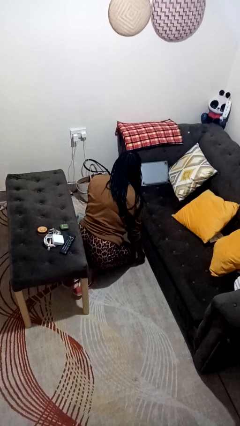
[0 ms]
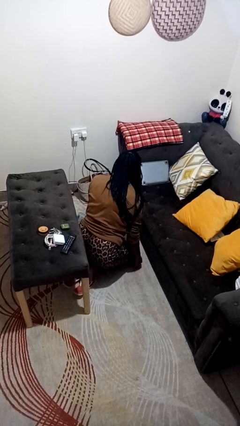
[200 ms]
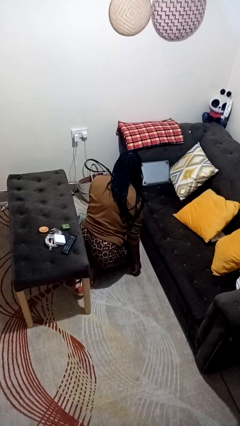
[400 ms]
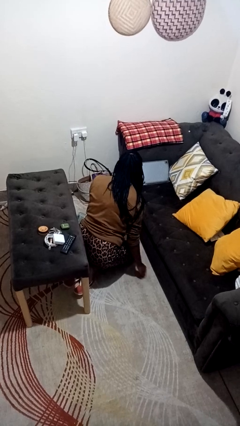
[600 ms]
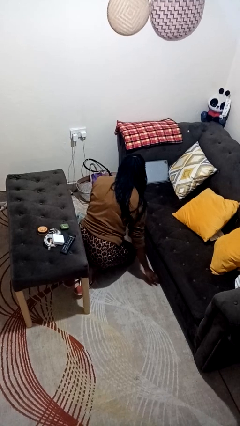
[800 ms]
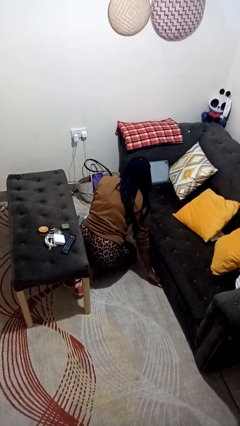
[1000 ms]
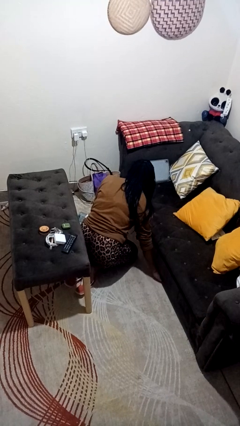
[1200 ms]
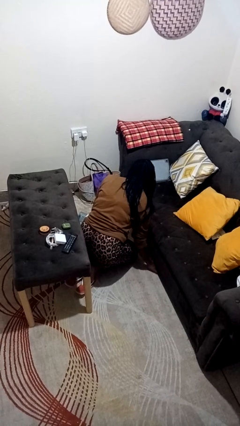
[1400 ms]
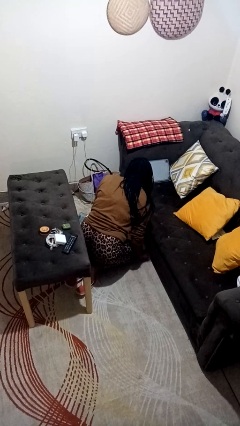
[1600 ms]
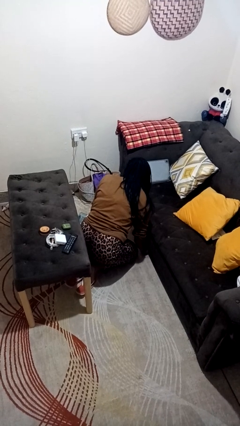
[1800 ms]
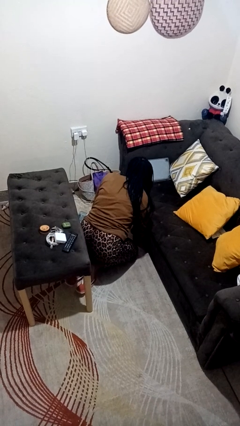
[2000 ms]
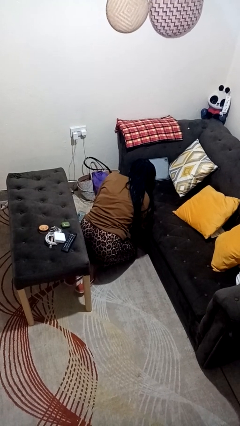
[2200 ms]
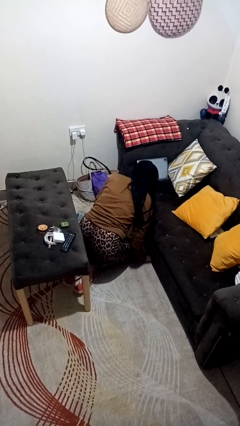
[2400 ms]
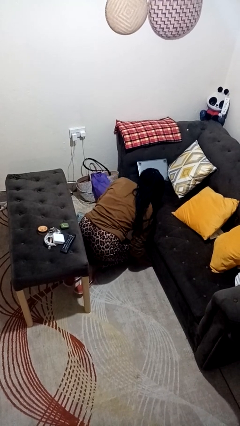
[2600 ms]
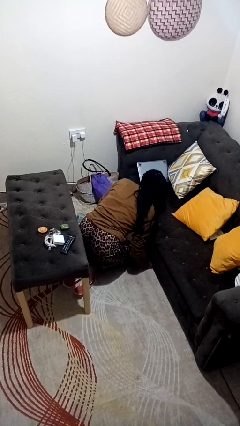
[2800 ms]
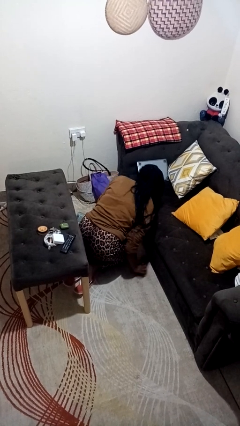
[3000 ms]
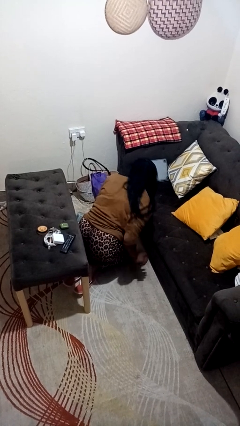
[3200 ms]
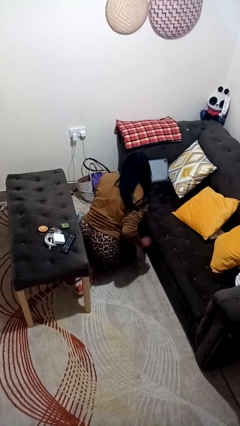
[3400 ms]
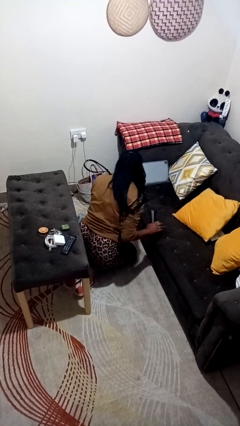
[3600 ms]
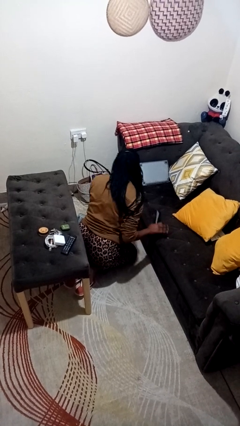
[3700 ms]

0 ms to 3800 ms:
person searches under couch

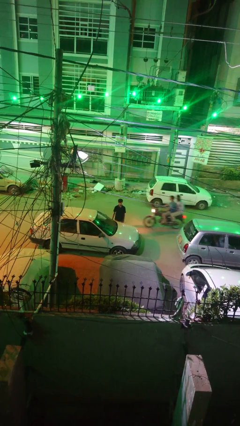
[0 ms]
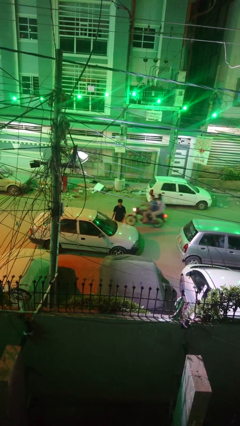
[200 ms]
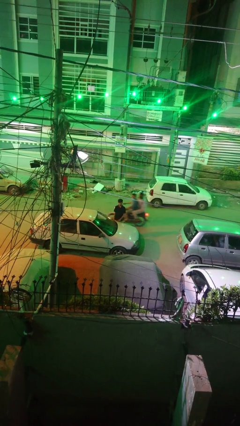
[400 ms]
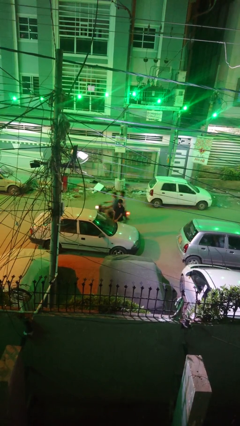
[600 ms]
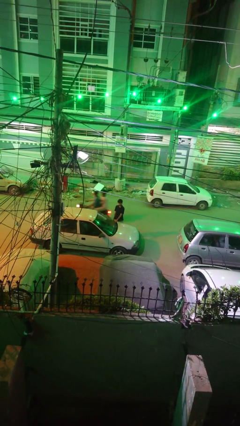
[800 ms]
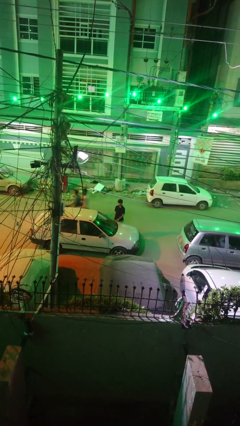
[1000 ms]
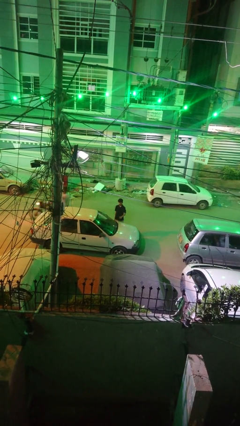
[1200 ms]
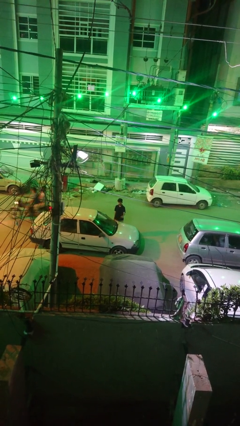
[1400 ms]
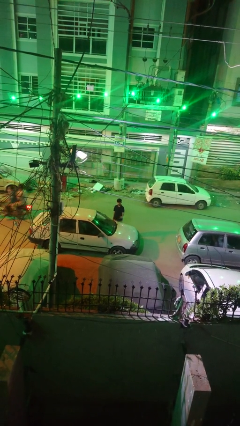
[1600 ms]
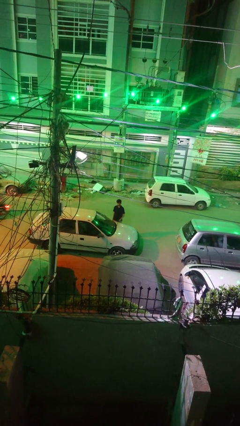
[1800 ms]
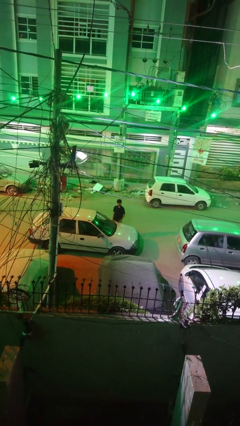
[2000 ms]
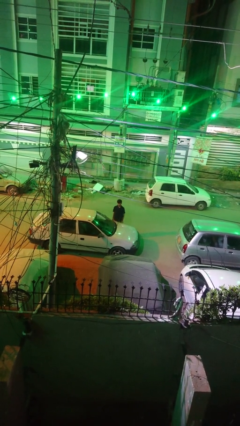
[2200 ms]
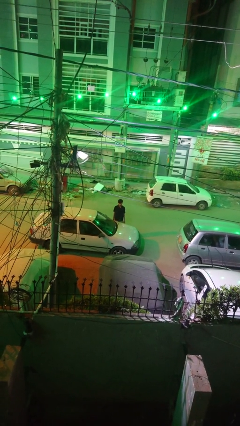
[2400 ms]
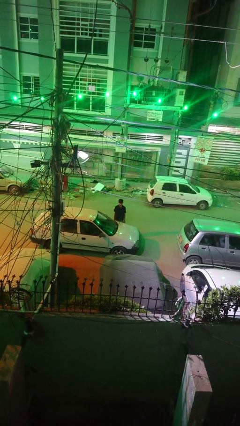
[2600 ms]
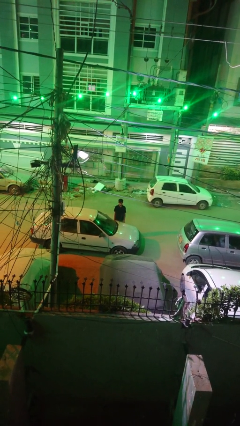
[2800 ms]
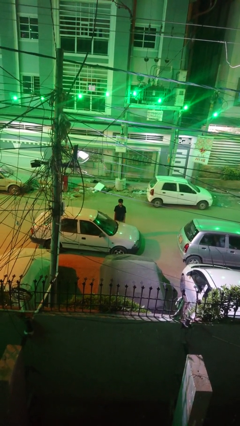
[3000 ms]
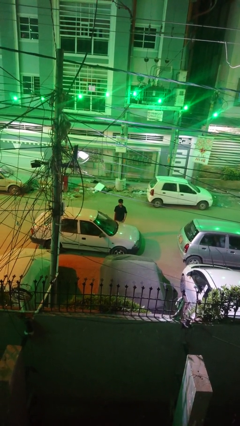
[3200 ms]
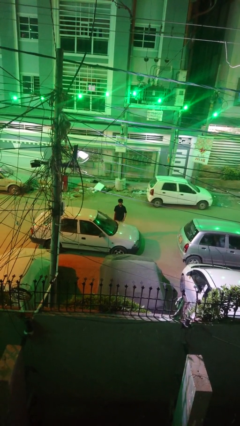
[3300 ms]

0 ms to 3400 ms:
person flips up car wipers

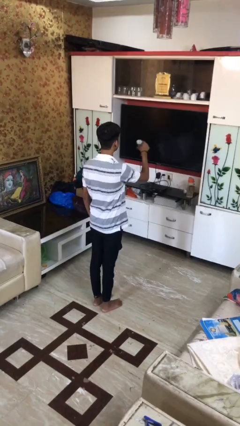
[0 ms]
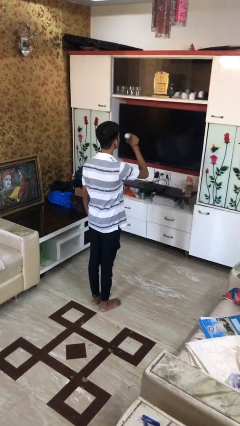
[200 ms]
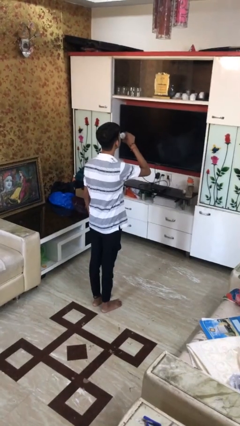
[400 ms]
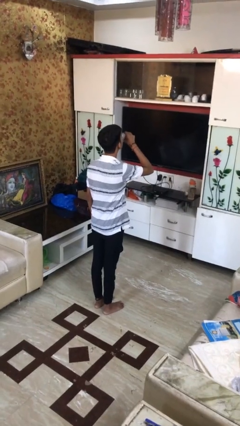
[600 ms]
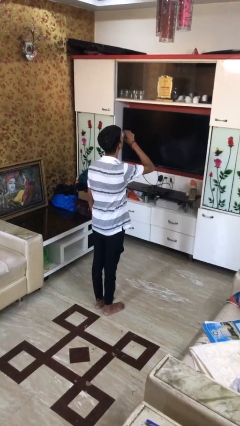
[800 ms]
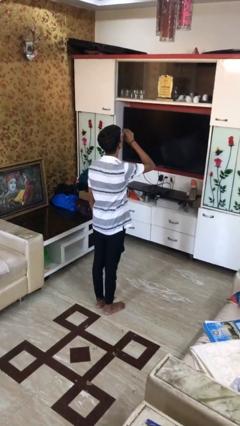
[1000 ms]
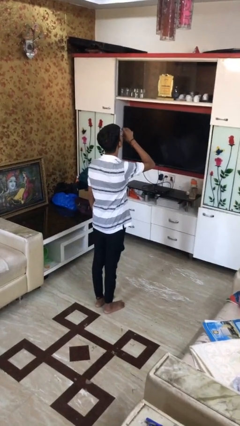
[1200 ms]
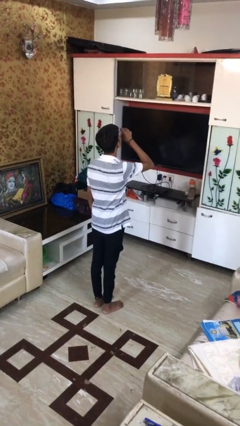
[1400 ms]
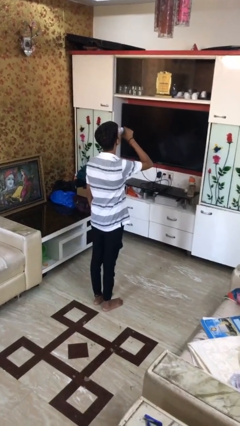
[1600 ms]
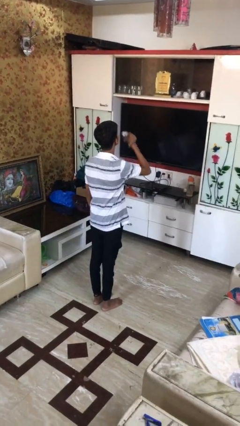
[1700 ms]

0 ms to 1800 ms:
person drinks from beverage can

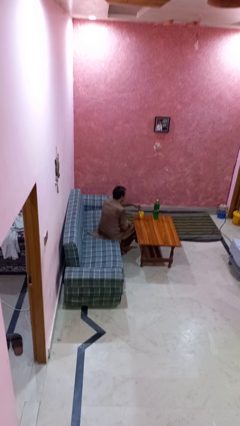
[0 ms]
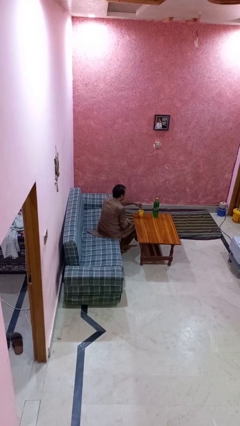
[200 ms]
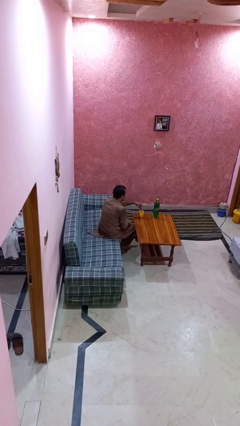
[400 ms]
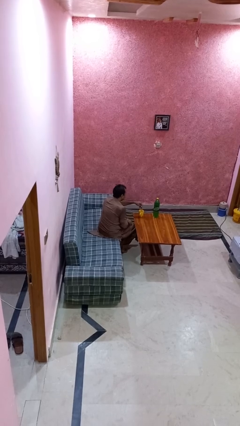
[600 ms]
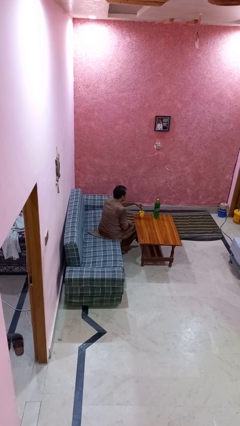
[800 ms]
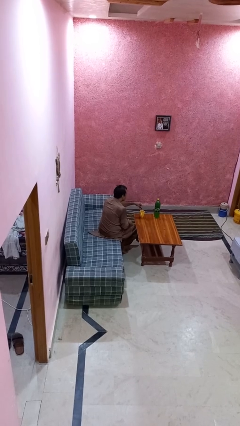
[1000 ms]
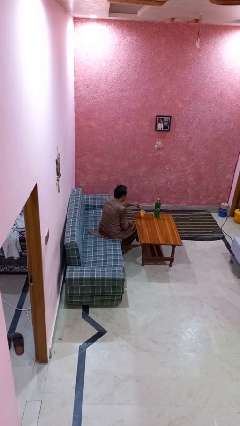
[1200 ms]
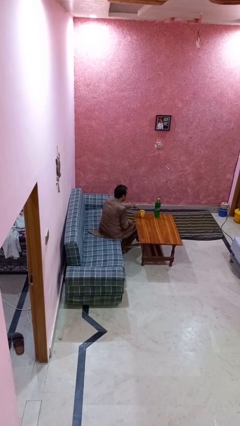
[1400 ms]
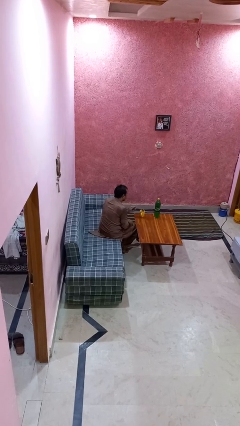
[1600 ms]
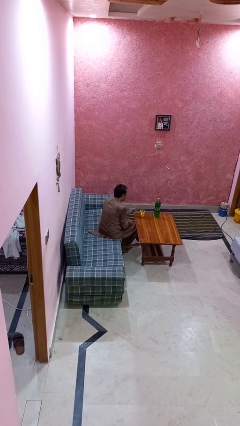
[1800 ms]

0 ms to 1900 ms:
person stirs mug

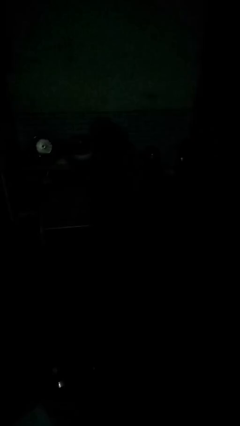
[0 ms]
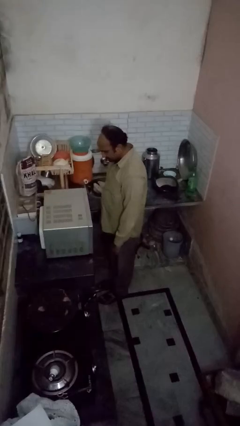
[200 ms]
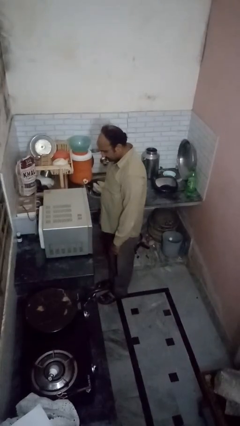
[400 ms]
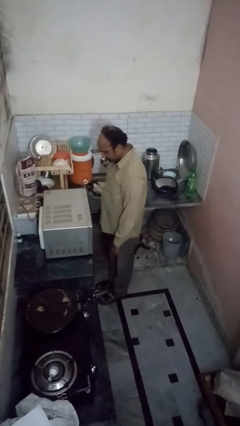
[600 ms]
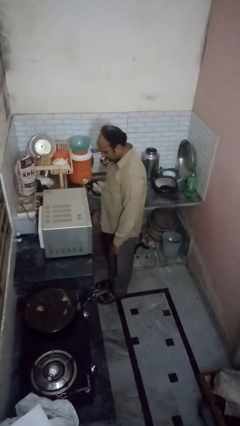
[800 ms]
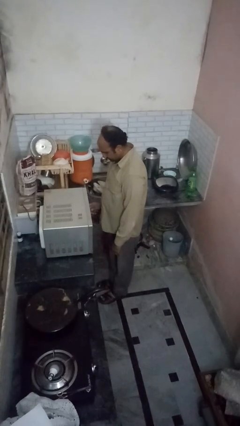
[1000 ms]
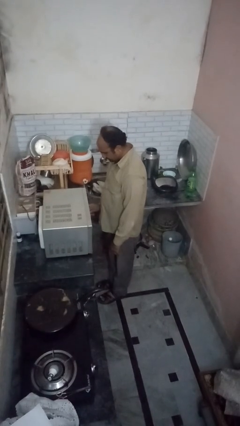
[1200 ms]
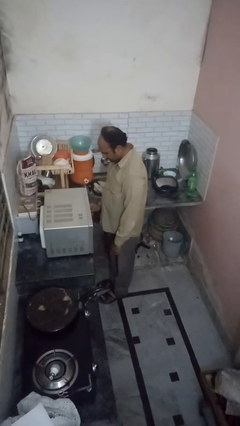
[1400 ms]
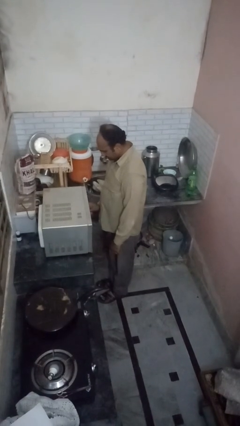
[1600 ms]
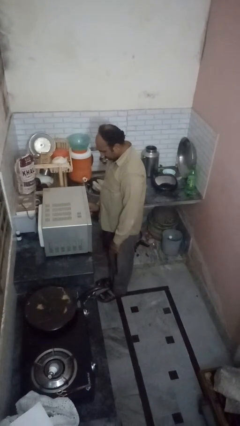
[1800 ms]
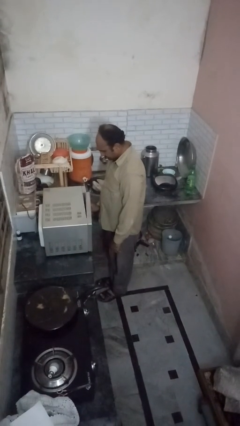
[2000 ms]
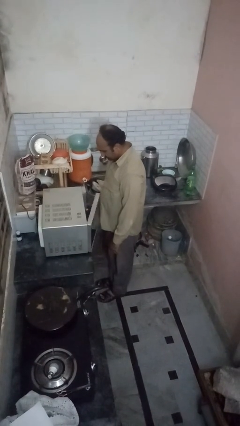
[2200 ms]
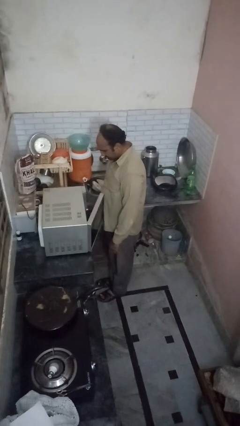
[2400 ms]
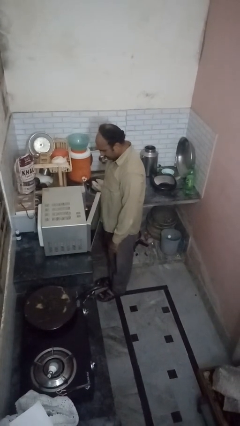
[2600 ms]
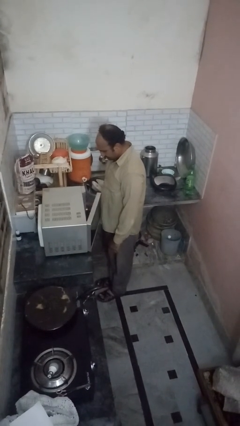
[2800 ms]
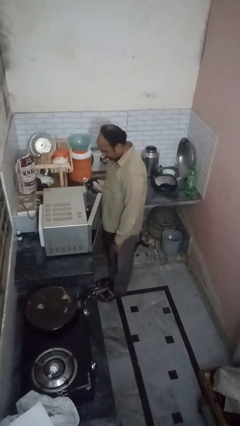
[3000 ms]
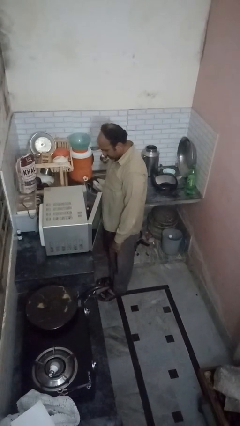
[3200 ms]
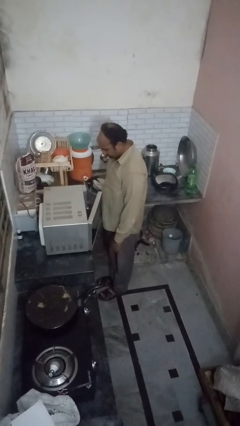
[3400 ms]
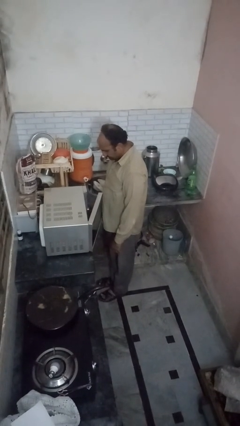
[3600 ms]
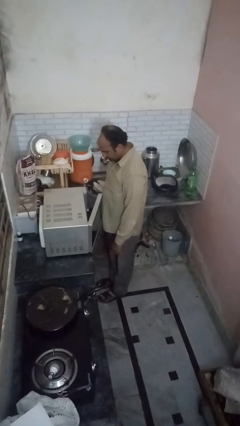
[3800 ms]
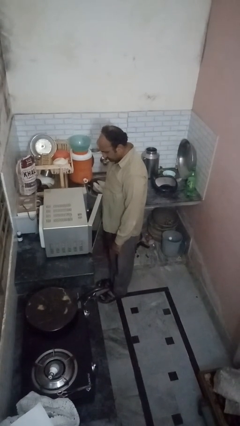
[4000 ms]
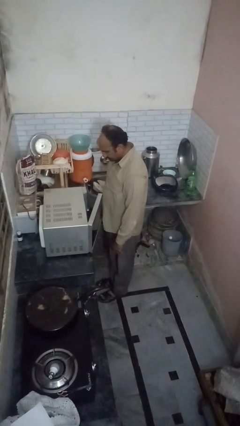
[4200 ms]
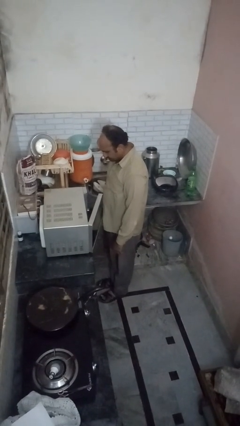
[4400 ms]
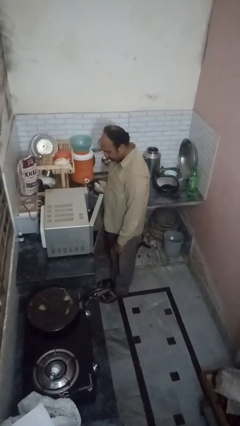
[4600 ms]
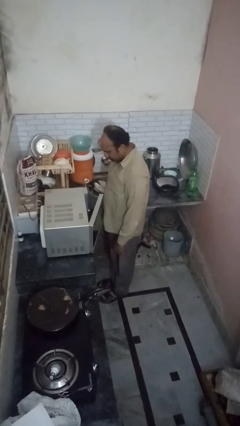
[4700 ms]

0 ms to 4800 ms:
person opens oven door

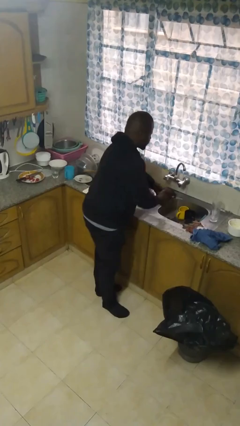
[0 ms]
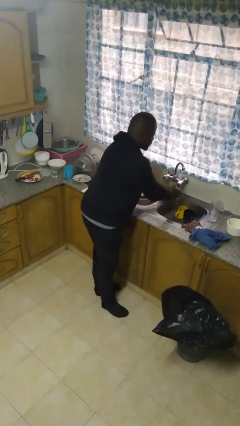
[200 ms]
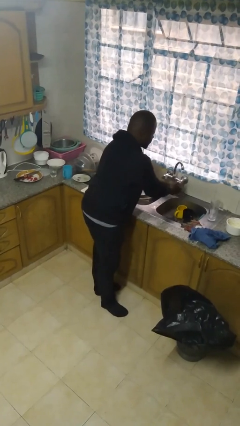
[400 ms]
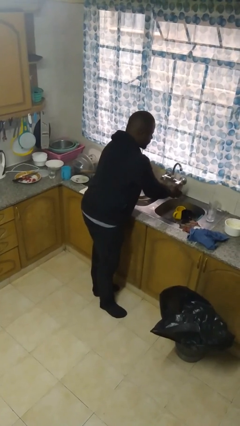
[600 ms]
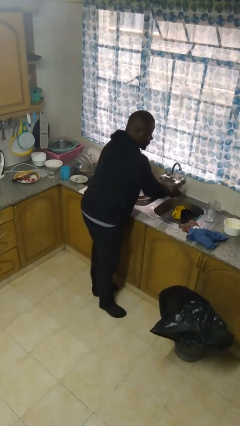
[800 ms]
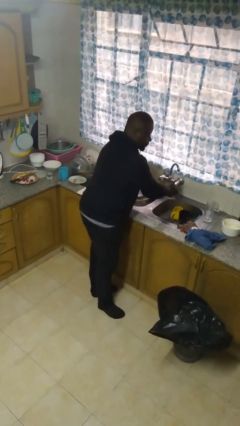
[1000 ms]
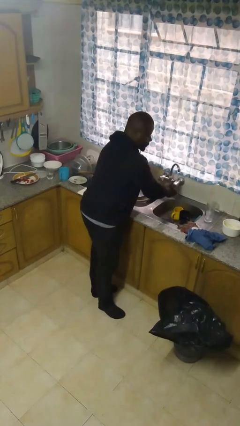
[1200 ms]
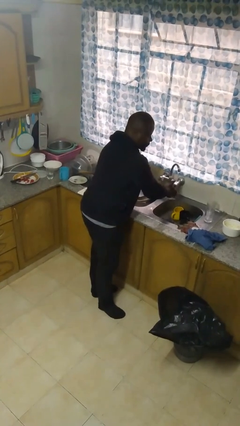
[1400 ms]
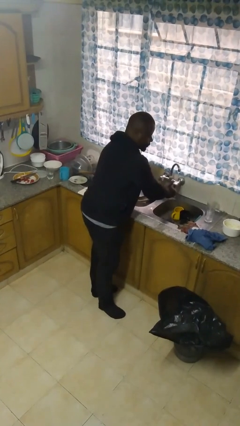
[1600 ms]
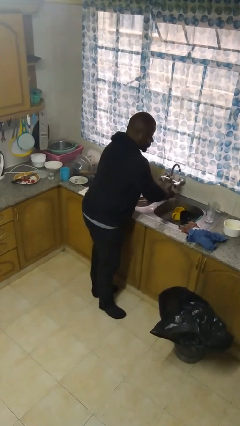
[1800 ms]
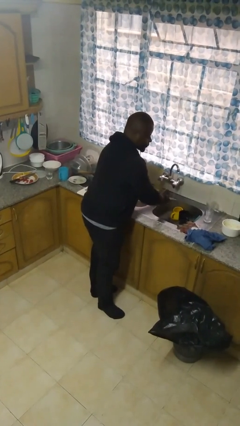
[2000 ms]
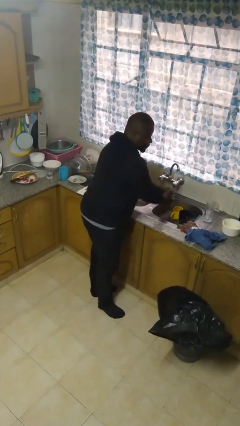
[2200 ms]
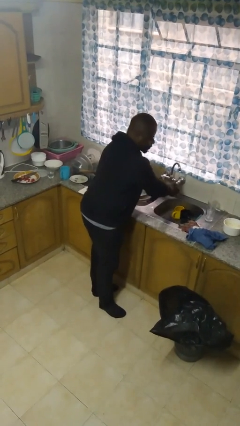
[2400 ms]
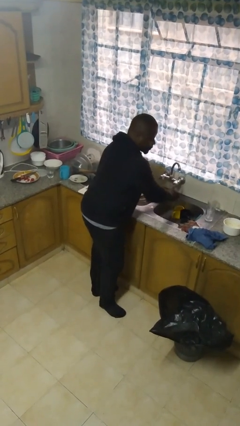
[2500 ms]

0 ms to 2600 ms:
person washes hands
